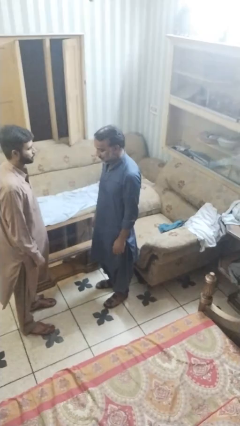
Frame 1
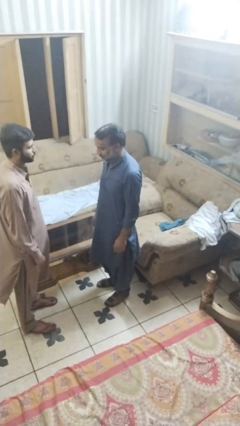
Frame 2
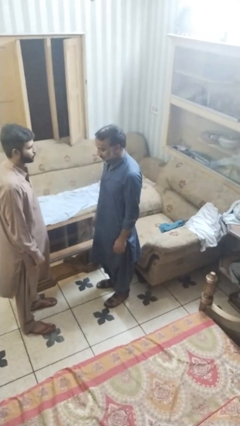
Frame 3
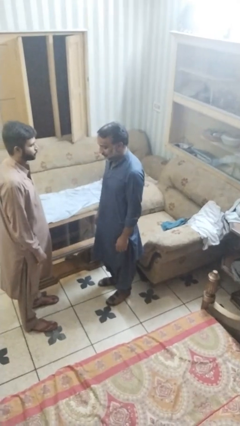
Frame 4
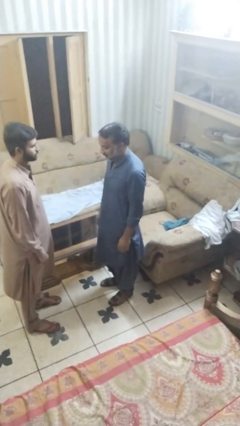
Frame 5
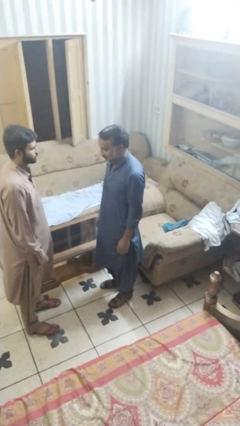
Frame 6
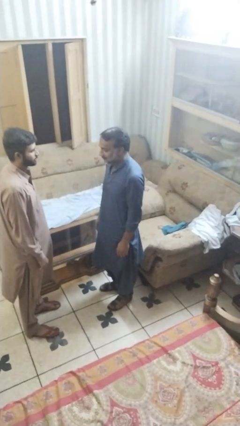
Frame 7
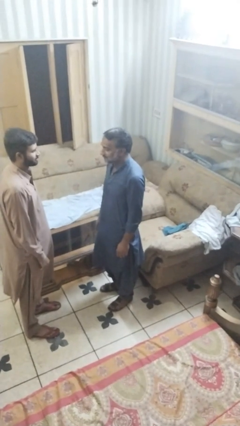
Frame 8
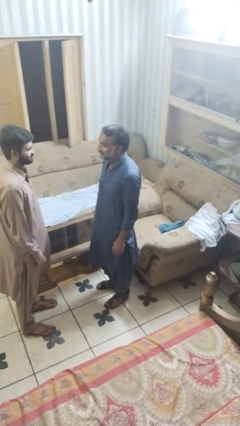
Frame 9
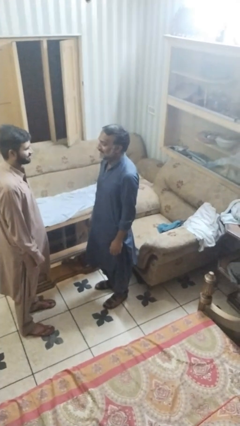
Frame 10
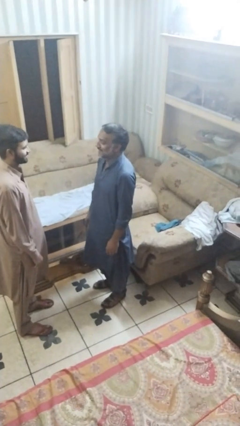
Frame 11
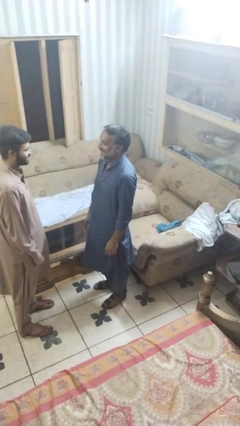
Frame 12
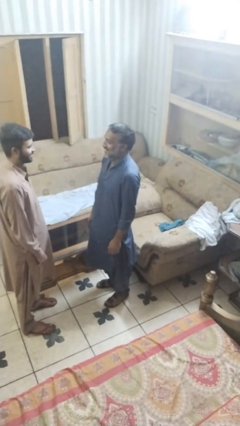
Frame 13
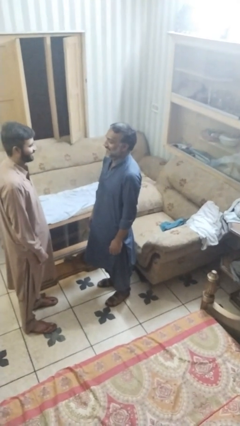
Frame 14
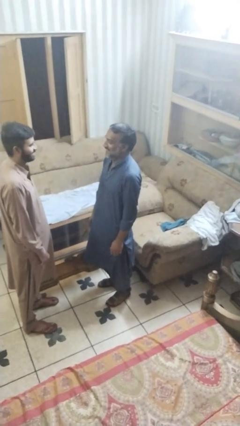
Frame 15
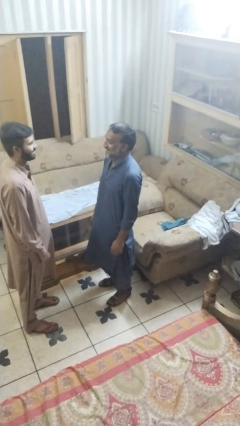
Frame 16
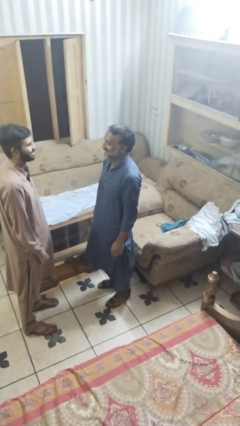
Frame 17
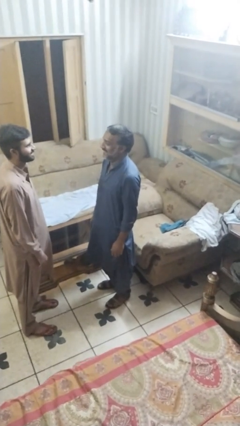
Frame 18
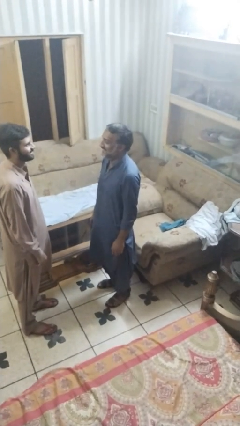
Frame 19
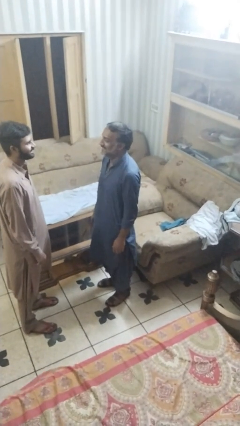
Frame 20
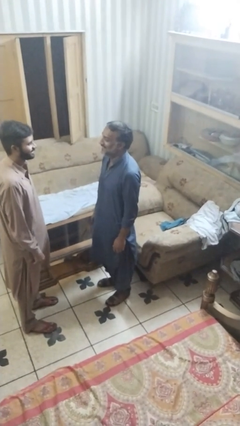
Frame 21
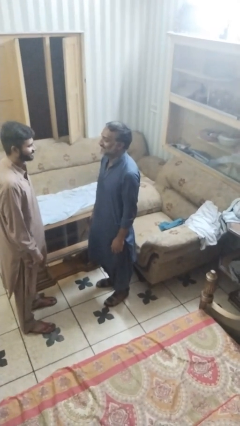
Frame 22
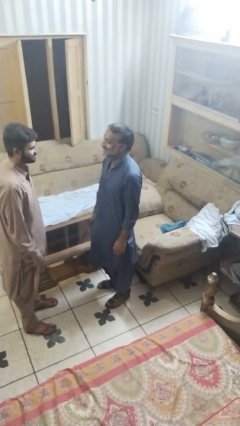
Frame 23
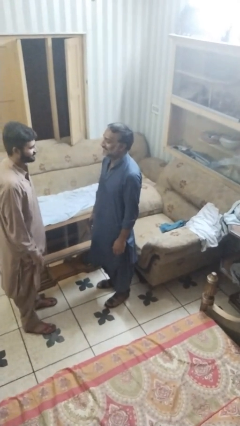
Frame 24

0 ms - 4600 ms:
person laughs with person

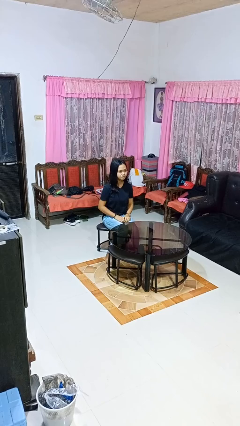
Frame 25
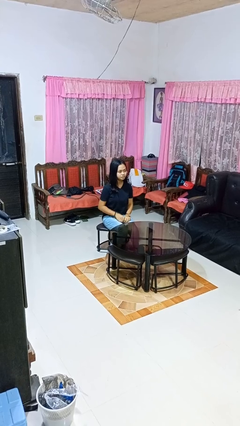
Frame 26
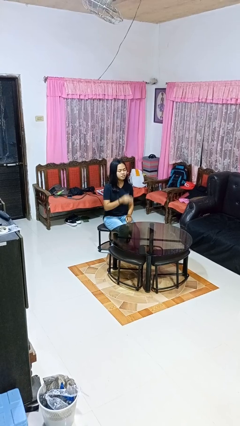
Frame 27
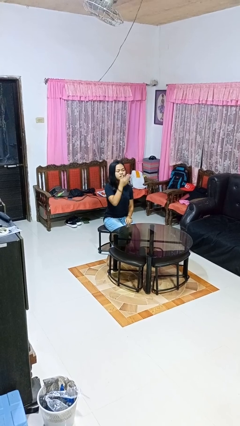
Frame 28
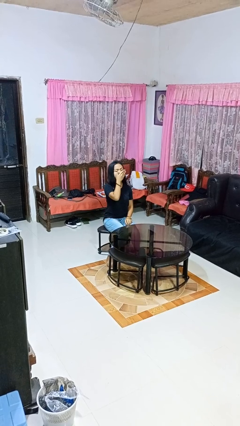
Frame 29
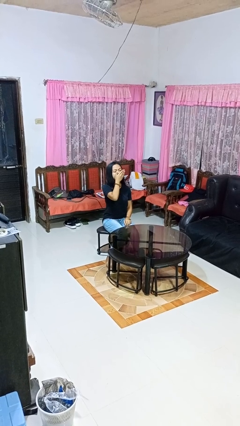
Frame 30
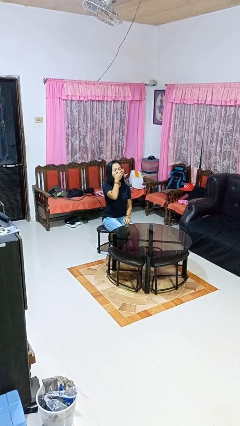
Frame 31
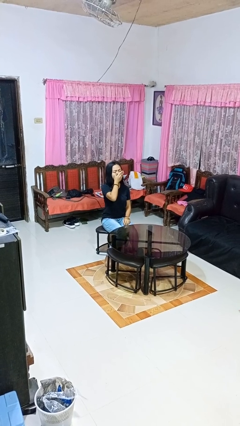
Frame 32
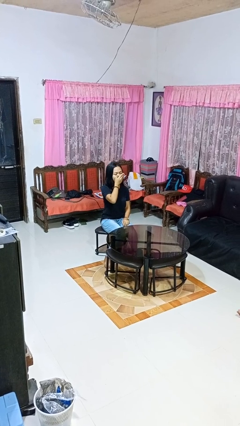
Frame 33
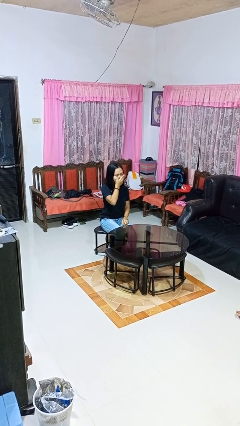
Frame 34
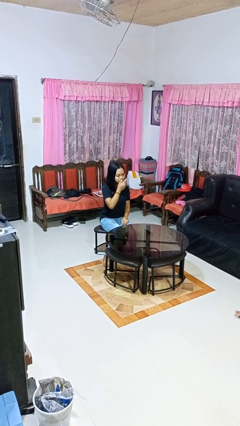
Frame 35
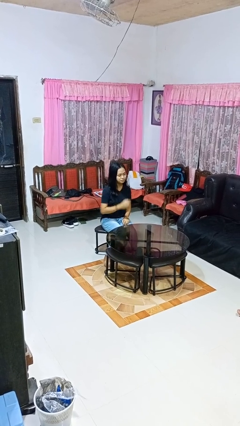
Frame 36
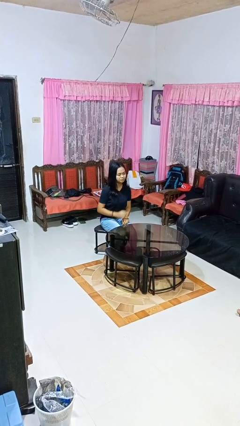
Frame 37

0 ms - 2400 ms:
person yawns

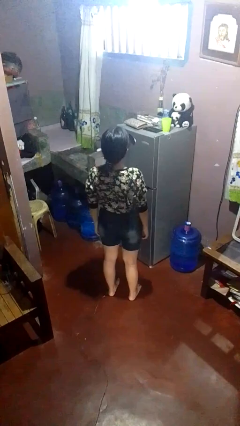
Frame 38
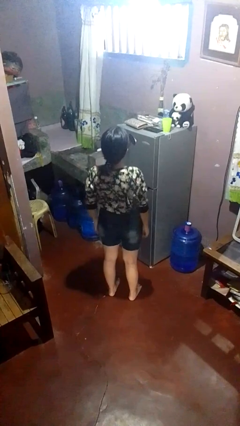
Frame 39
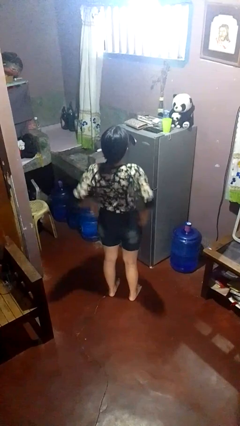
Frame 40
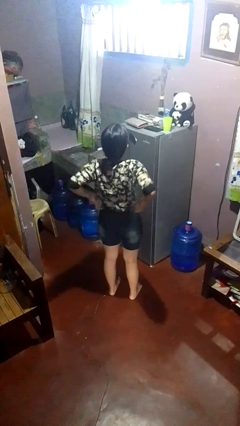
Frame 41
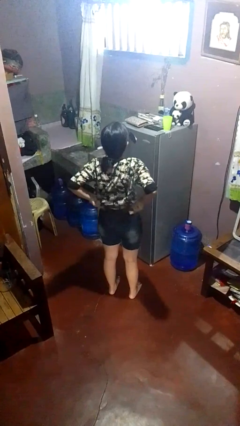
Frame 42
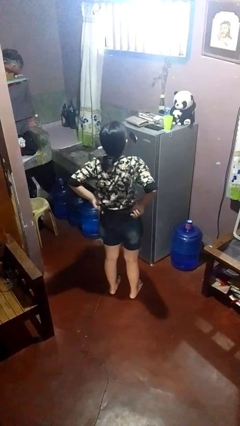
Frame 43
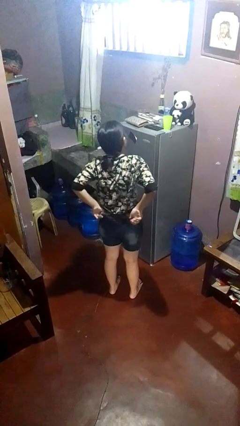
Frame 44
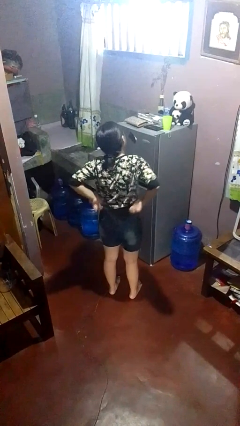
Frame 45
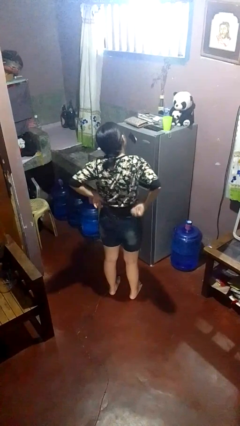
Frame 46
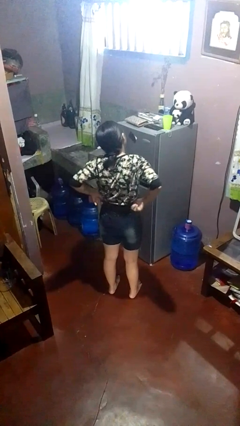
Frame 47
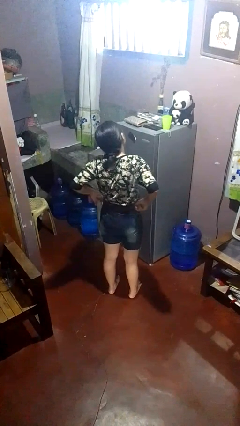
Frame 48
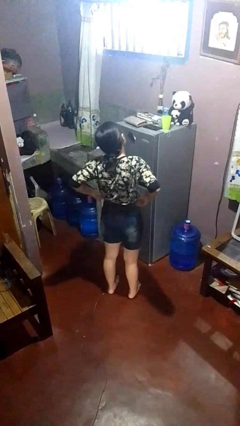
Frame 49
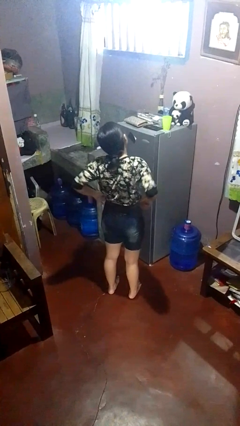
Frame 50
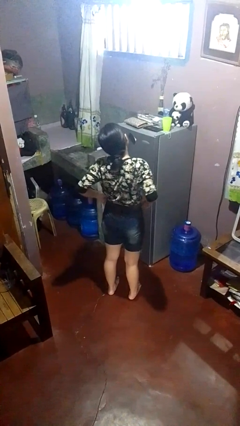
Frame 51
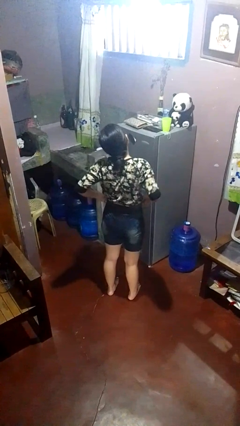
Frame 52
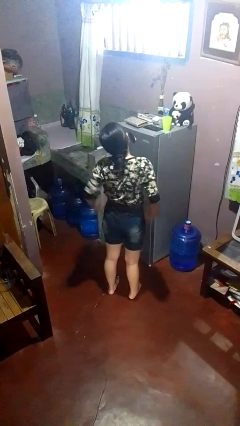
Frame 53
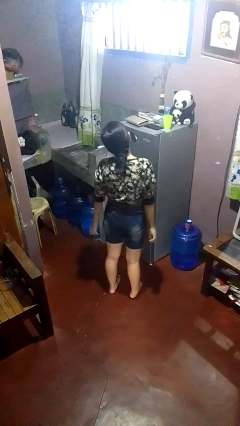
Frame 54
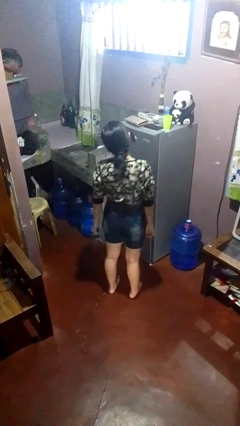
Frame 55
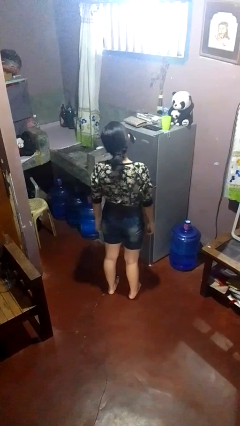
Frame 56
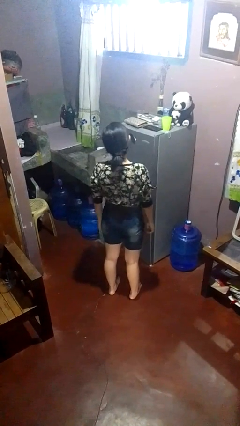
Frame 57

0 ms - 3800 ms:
person hikes up pants

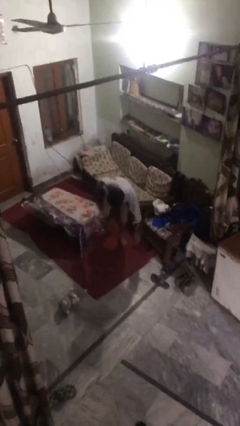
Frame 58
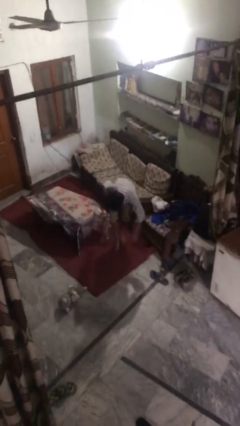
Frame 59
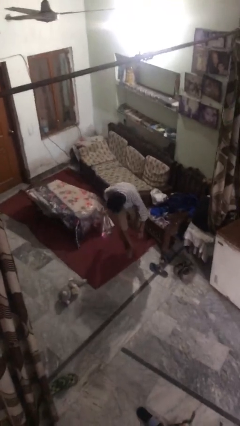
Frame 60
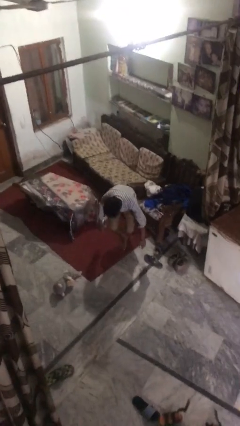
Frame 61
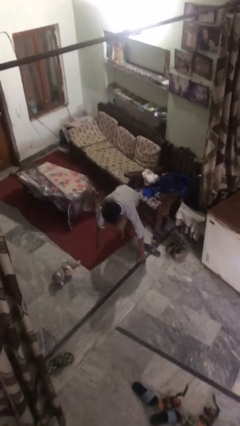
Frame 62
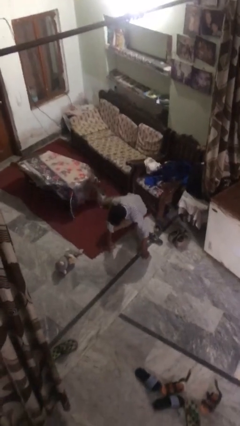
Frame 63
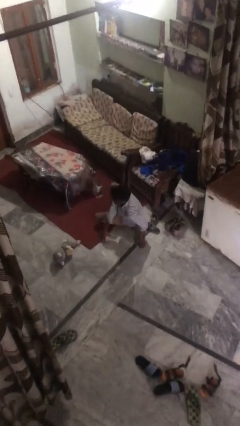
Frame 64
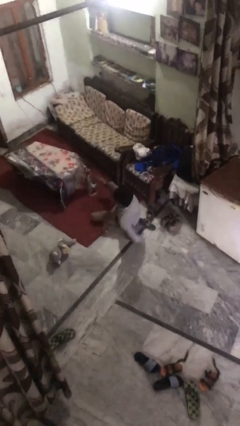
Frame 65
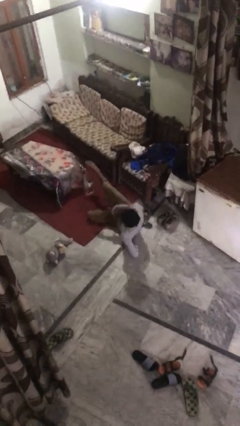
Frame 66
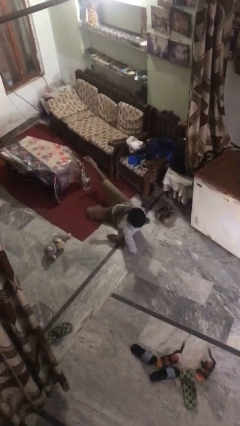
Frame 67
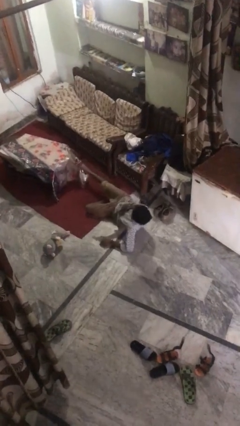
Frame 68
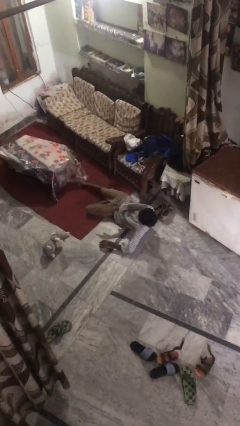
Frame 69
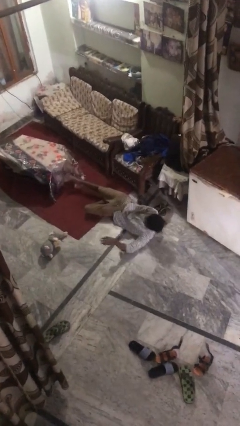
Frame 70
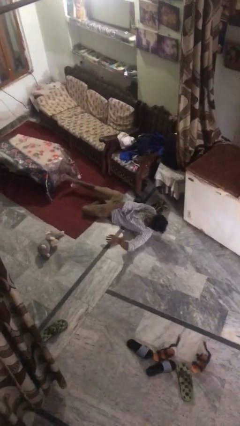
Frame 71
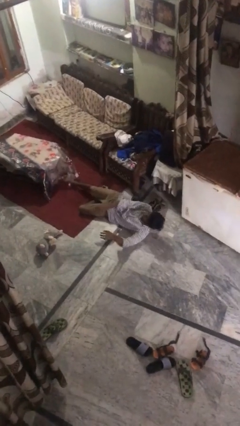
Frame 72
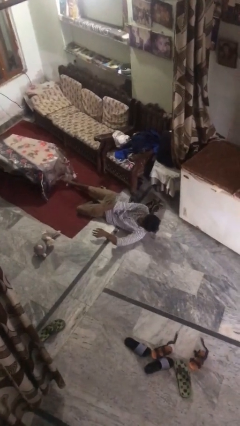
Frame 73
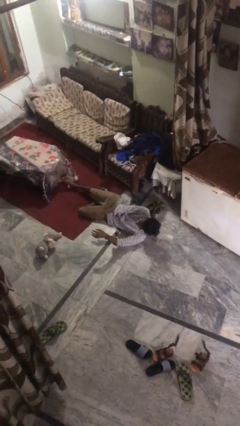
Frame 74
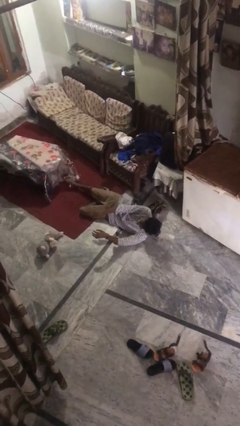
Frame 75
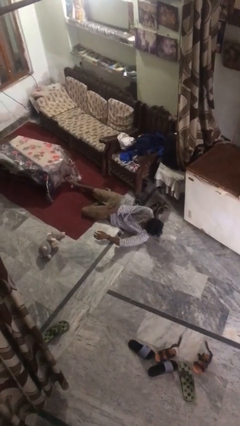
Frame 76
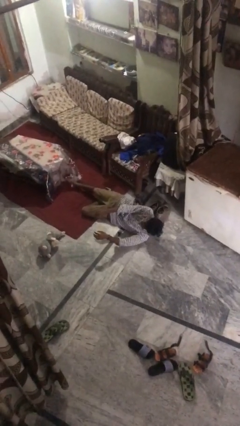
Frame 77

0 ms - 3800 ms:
person lies down on floor

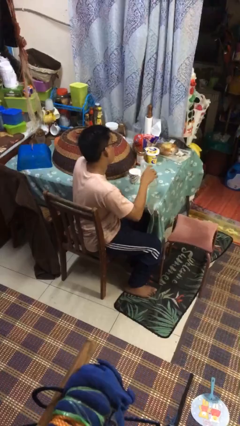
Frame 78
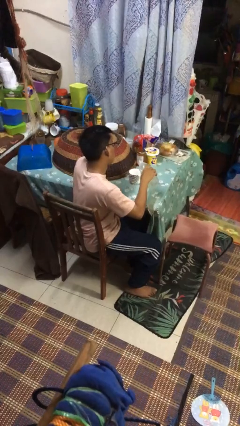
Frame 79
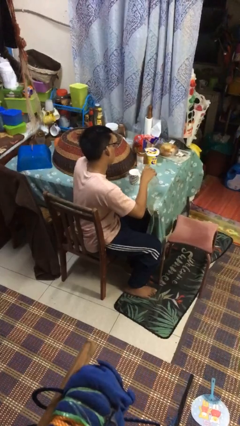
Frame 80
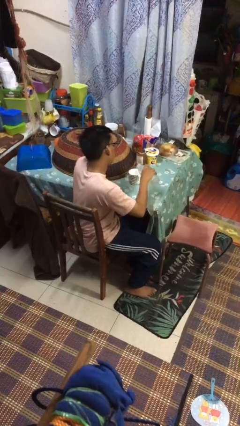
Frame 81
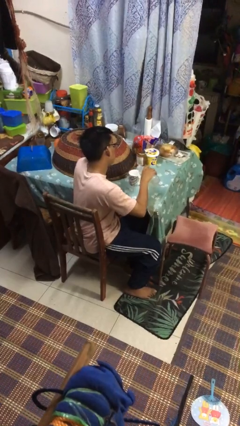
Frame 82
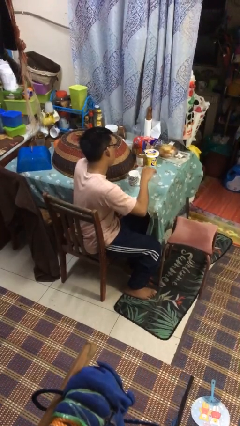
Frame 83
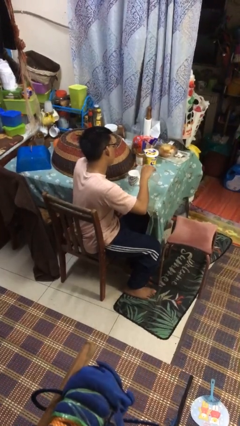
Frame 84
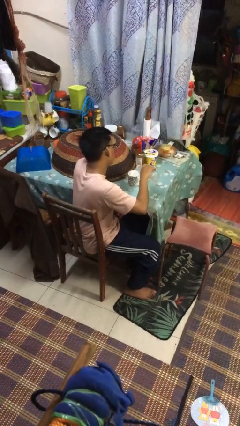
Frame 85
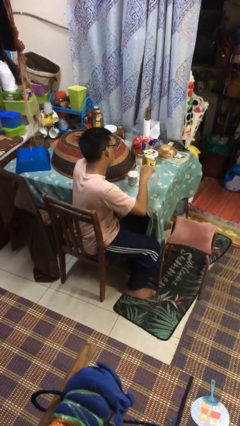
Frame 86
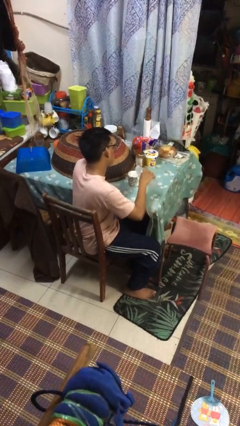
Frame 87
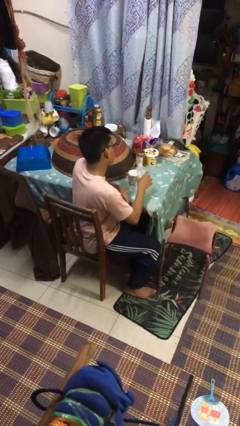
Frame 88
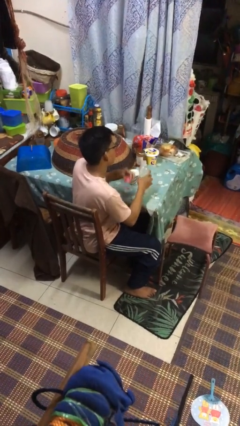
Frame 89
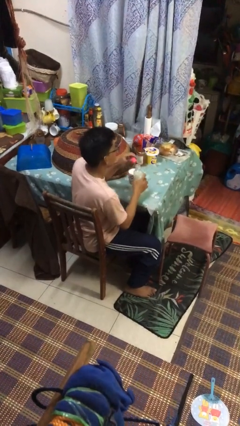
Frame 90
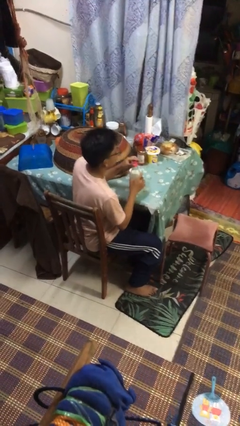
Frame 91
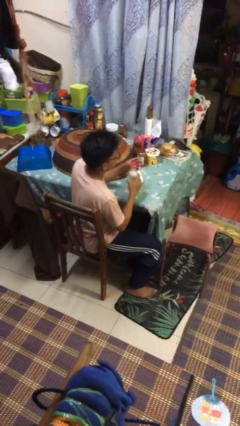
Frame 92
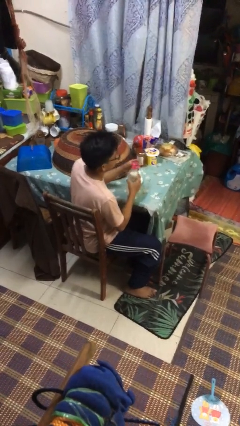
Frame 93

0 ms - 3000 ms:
person pours liquid into cup
